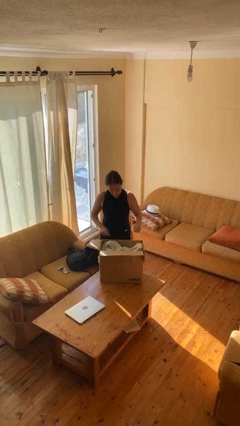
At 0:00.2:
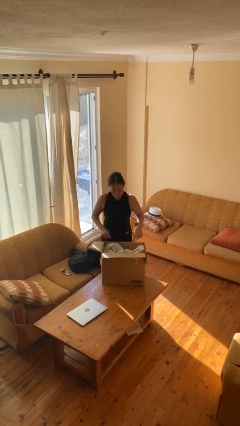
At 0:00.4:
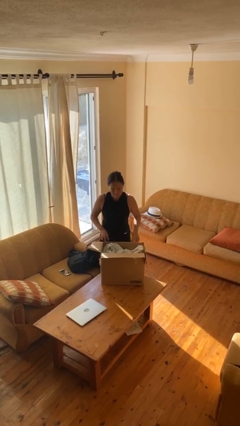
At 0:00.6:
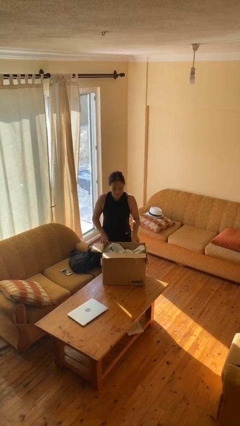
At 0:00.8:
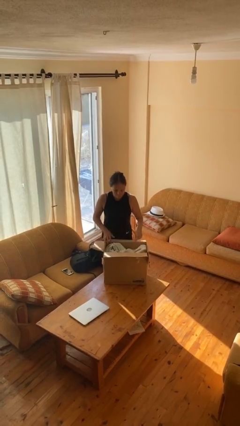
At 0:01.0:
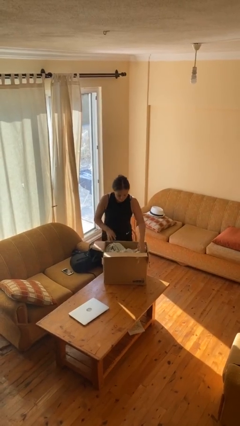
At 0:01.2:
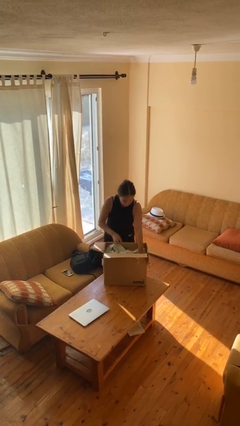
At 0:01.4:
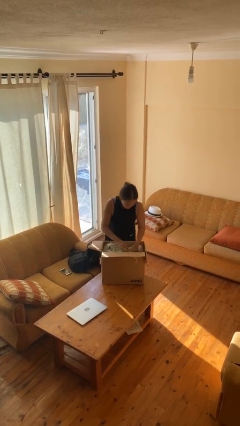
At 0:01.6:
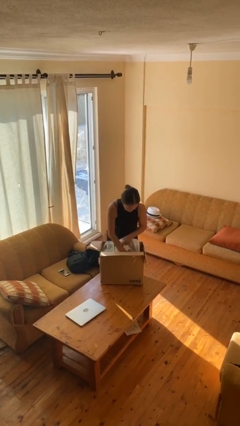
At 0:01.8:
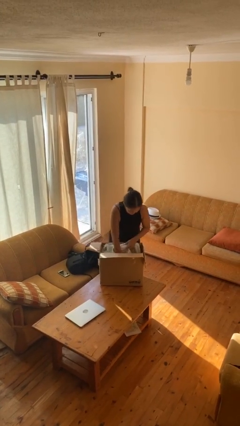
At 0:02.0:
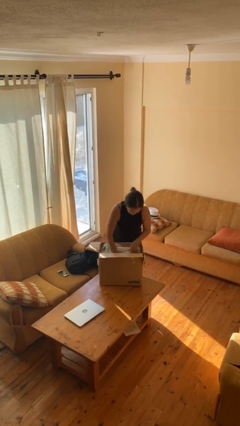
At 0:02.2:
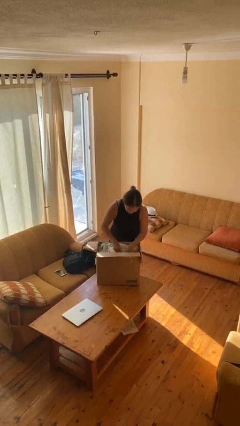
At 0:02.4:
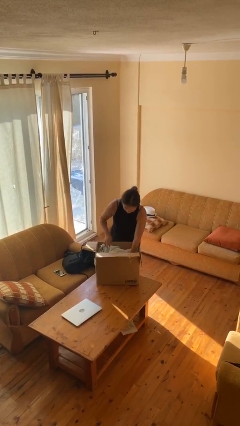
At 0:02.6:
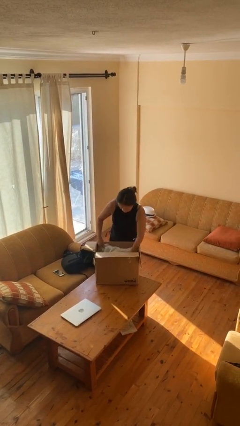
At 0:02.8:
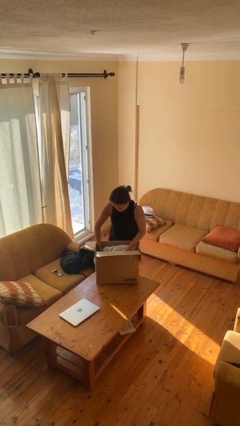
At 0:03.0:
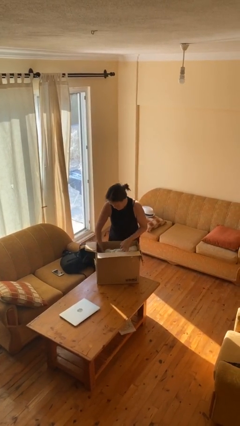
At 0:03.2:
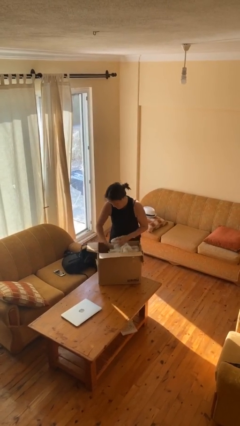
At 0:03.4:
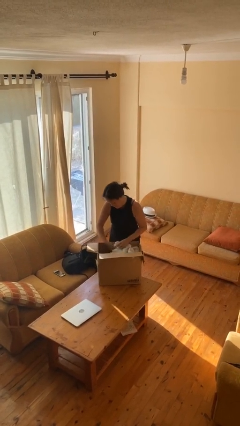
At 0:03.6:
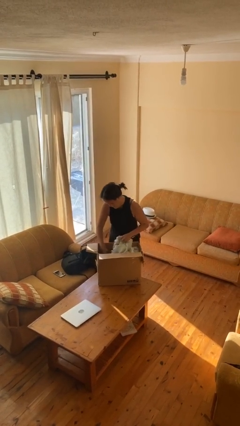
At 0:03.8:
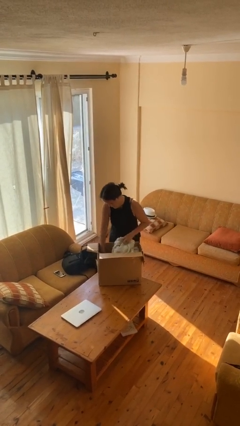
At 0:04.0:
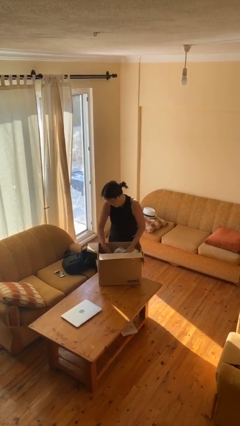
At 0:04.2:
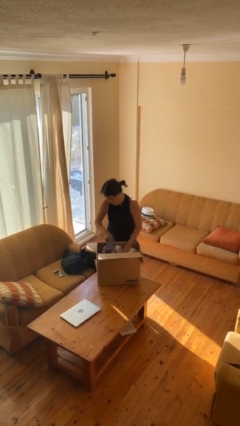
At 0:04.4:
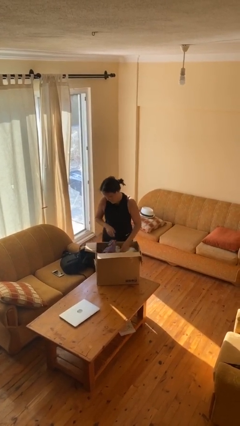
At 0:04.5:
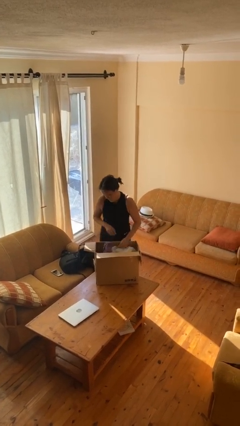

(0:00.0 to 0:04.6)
person searches in box

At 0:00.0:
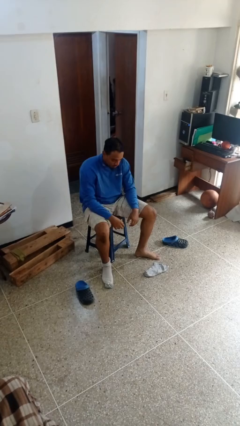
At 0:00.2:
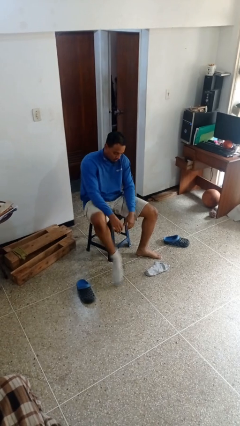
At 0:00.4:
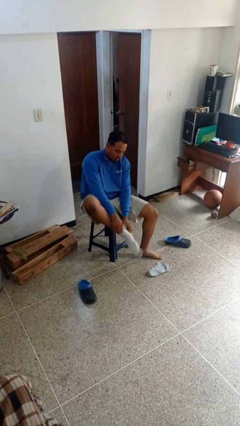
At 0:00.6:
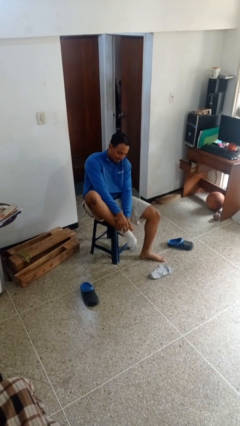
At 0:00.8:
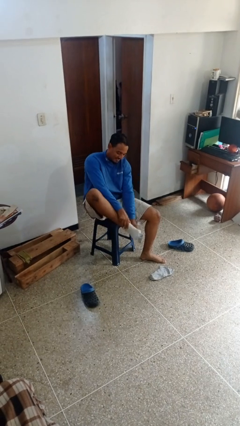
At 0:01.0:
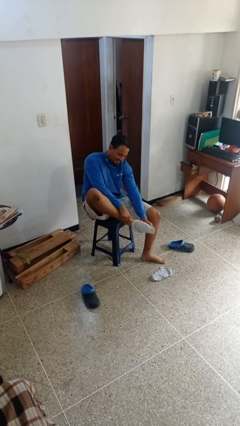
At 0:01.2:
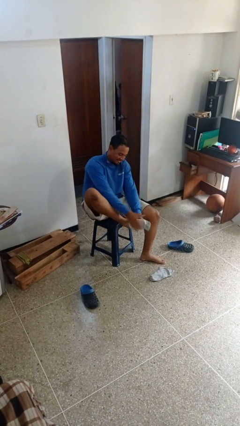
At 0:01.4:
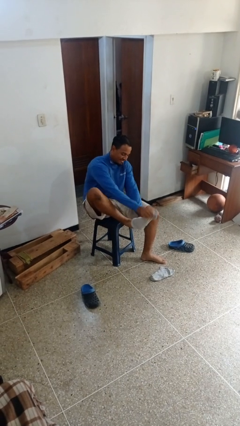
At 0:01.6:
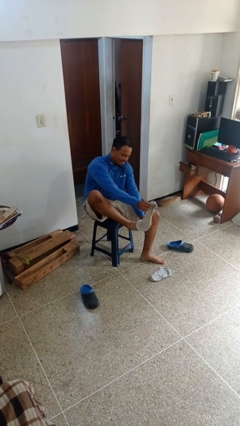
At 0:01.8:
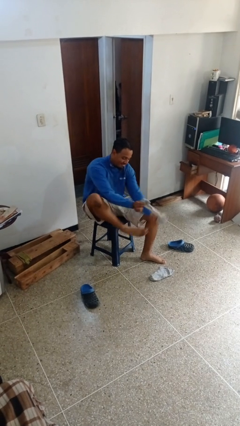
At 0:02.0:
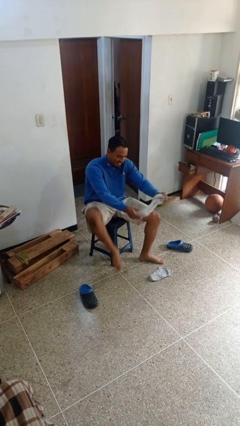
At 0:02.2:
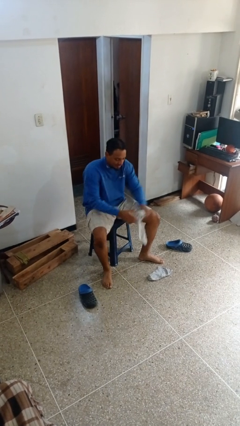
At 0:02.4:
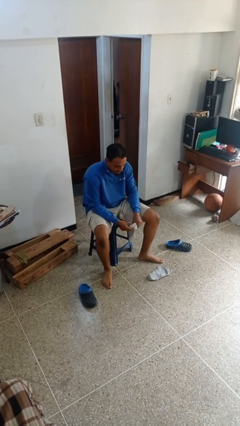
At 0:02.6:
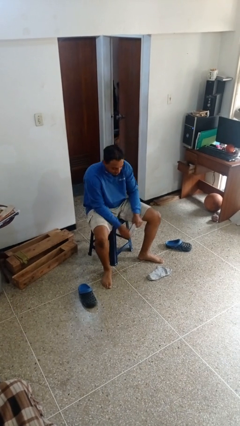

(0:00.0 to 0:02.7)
person takes off socks

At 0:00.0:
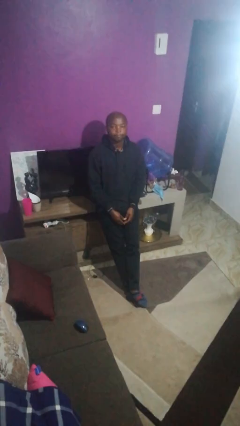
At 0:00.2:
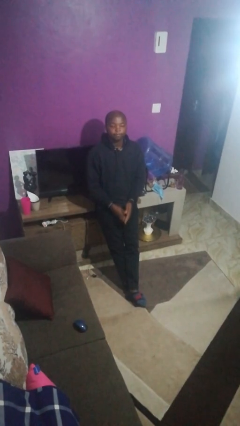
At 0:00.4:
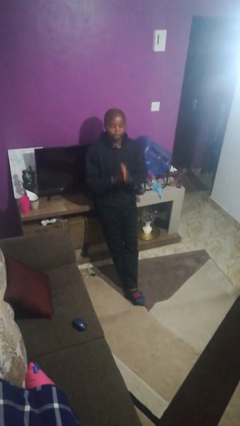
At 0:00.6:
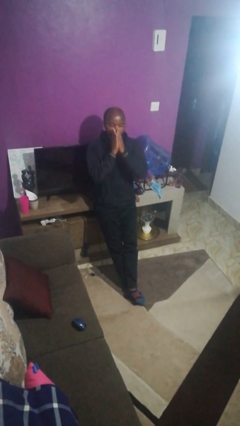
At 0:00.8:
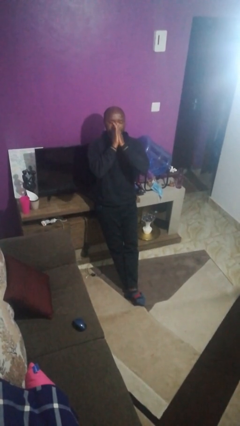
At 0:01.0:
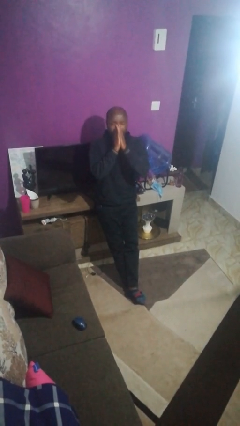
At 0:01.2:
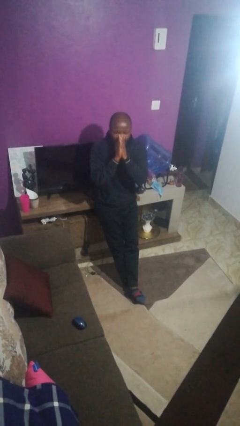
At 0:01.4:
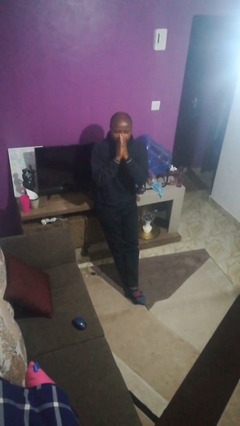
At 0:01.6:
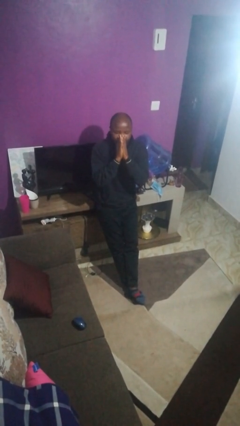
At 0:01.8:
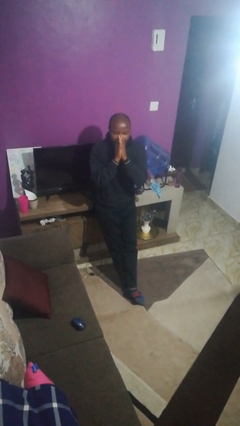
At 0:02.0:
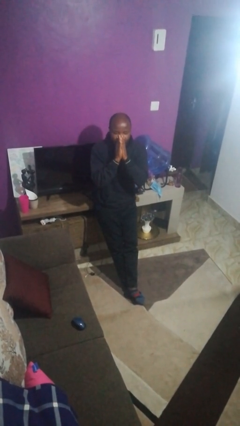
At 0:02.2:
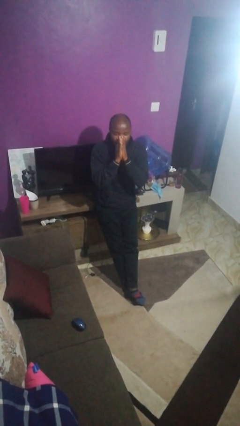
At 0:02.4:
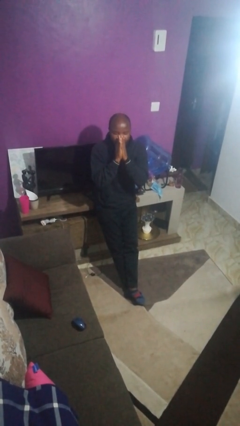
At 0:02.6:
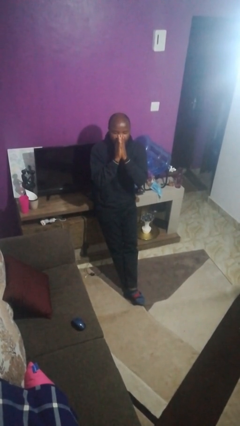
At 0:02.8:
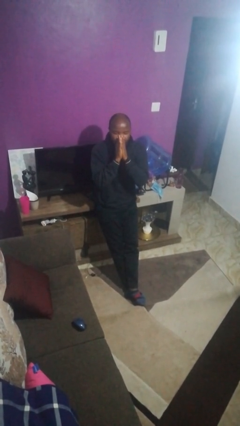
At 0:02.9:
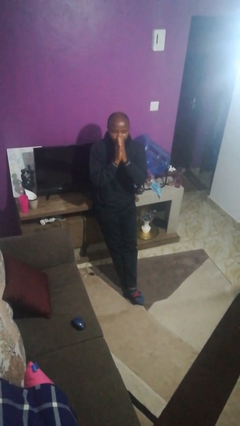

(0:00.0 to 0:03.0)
person sneezes into hand

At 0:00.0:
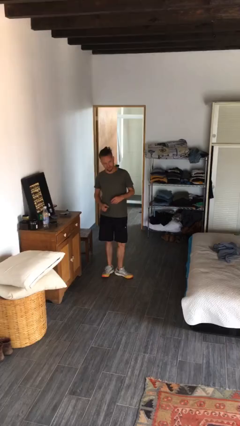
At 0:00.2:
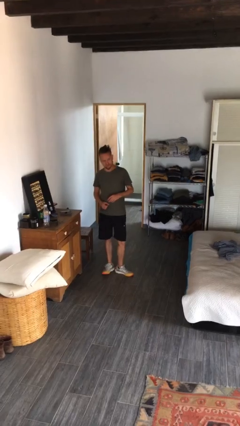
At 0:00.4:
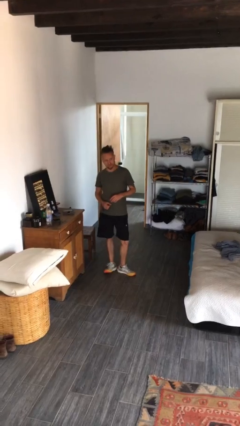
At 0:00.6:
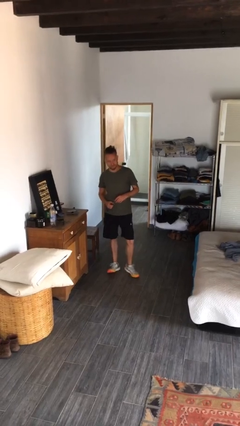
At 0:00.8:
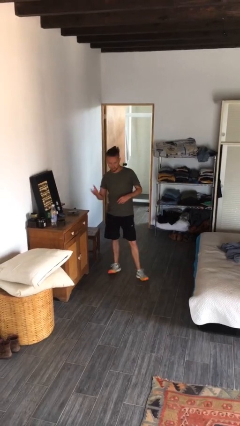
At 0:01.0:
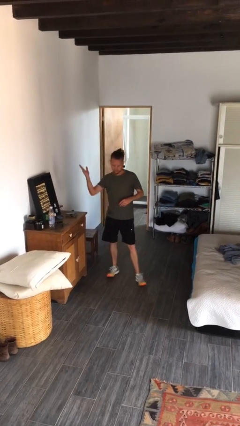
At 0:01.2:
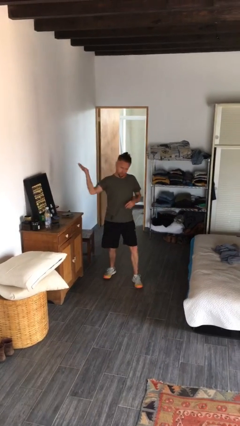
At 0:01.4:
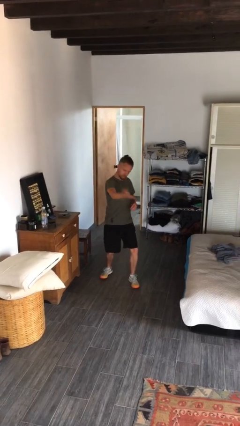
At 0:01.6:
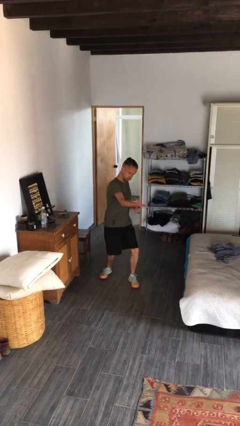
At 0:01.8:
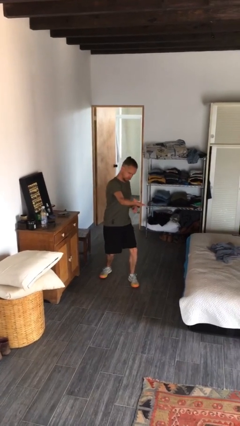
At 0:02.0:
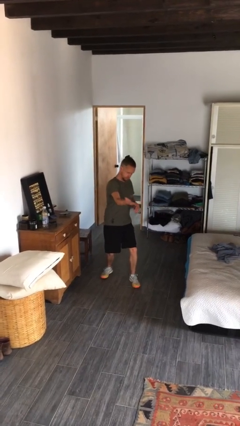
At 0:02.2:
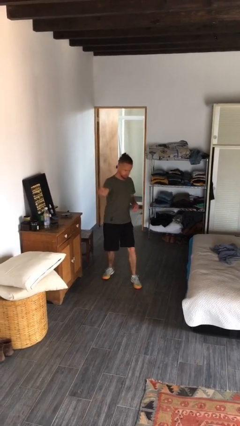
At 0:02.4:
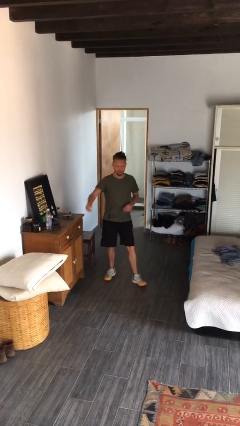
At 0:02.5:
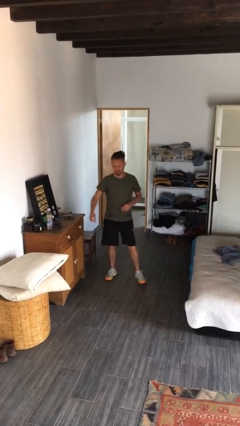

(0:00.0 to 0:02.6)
person karate chop

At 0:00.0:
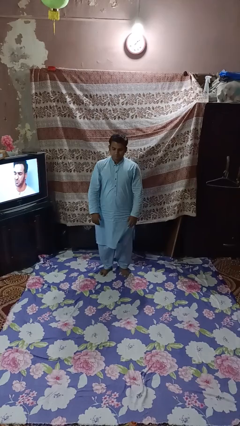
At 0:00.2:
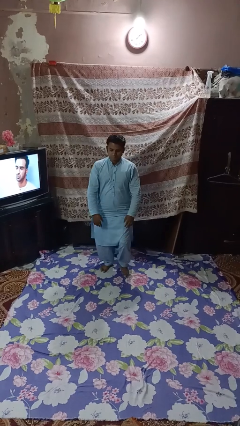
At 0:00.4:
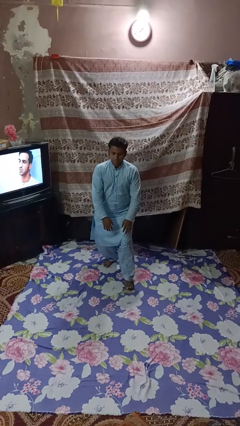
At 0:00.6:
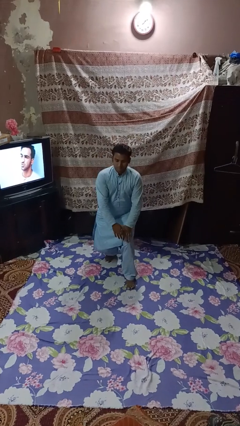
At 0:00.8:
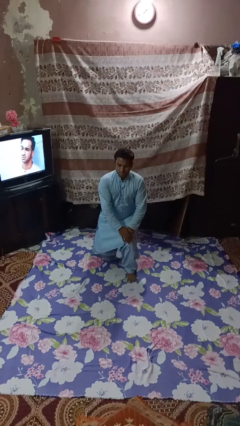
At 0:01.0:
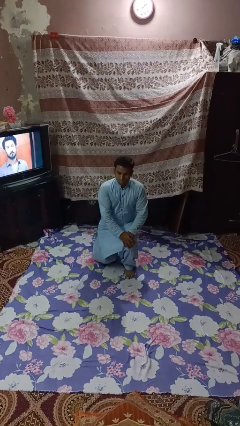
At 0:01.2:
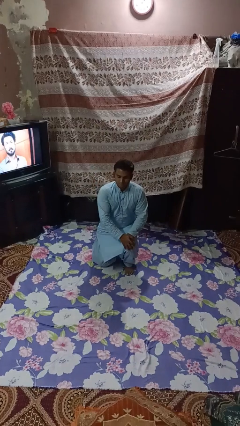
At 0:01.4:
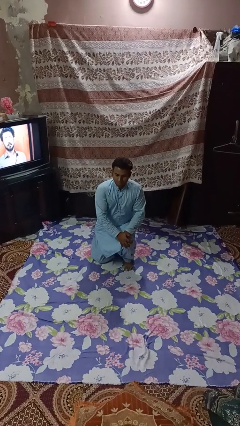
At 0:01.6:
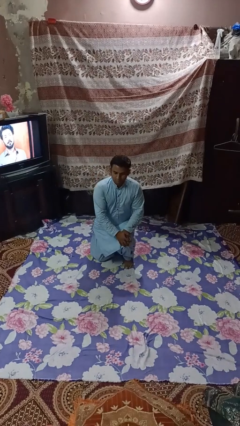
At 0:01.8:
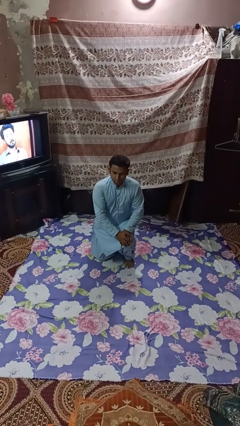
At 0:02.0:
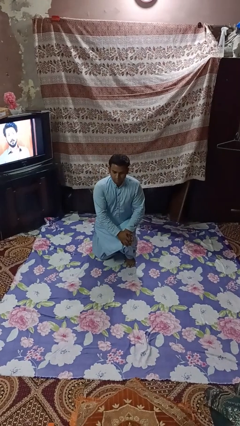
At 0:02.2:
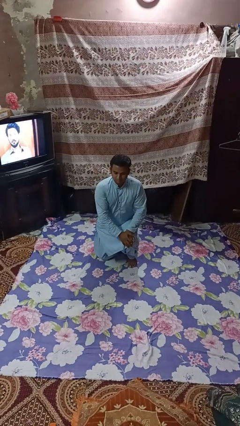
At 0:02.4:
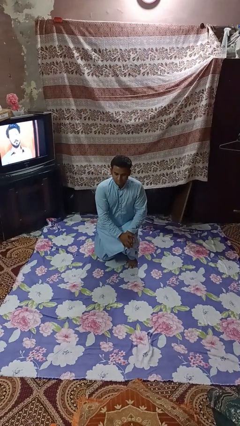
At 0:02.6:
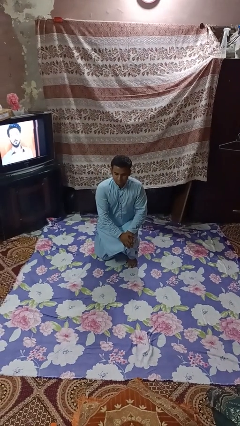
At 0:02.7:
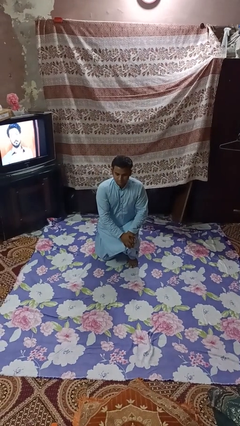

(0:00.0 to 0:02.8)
person exercises with lunges

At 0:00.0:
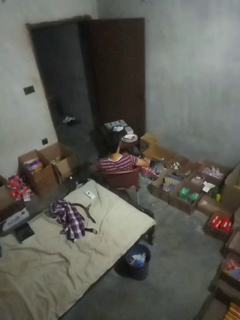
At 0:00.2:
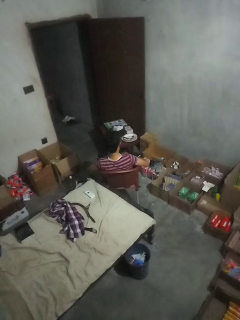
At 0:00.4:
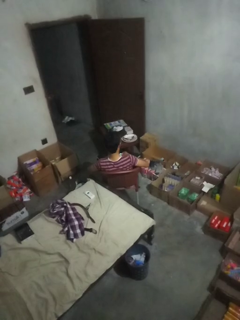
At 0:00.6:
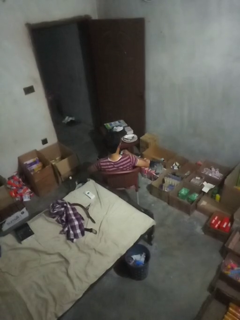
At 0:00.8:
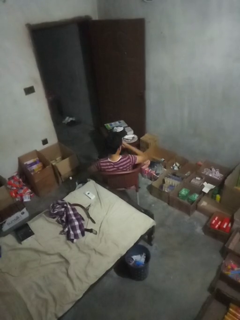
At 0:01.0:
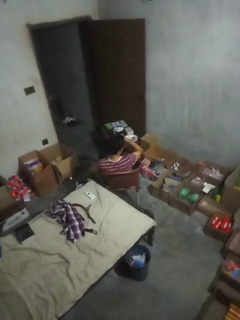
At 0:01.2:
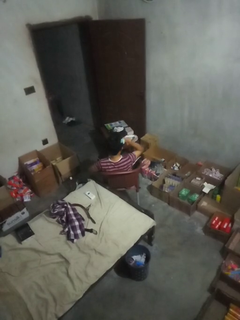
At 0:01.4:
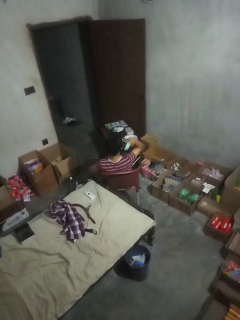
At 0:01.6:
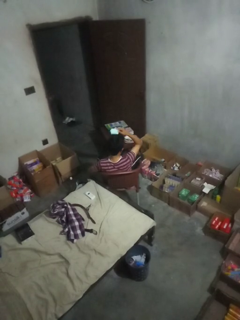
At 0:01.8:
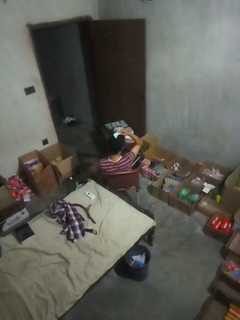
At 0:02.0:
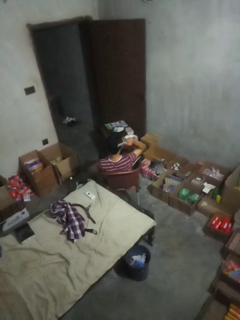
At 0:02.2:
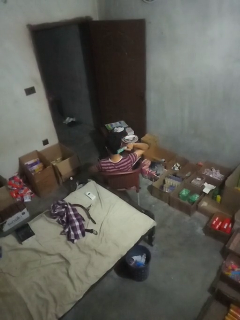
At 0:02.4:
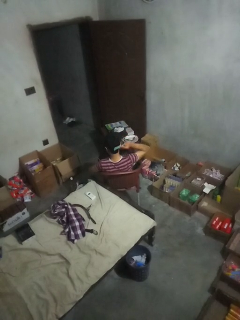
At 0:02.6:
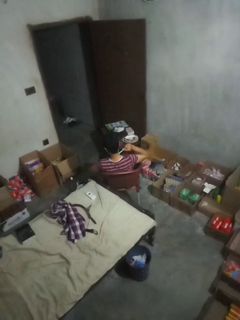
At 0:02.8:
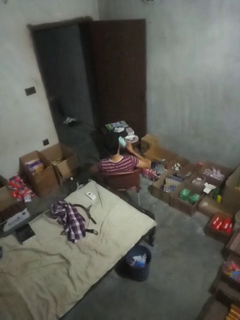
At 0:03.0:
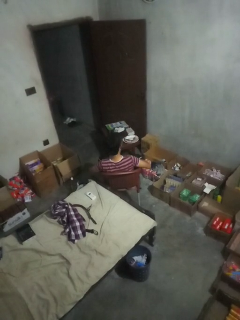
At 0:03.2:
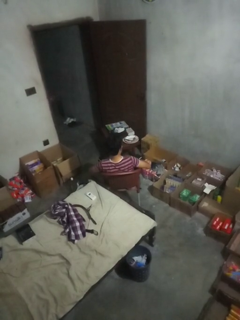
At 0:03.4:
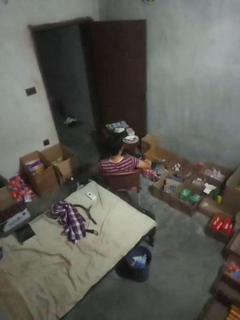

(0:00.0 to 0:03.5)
person brushes hair
